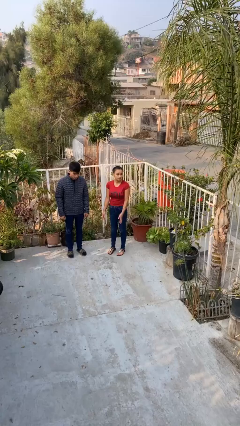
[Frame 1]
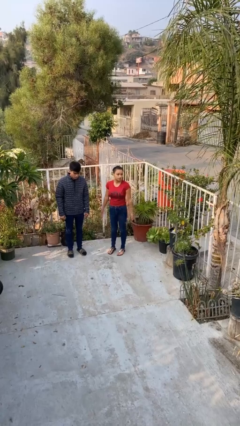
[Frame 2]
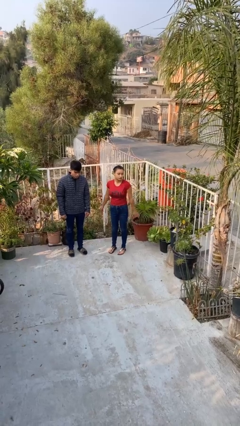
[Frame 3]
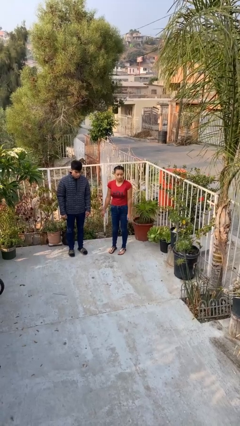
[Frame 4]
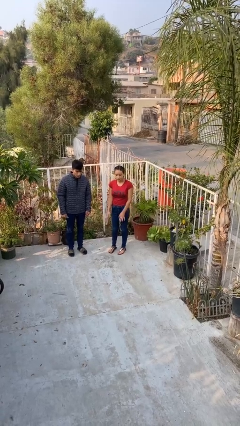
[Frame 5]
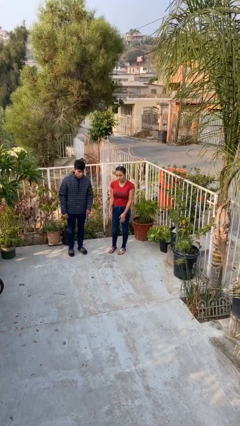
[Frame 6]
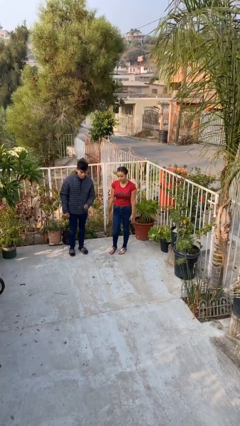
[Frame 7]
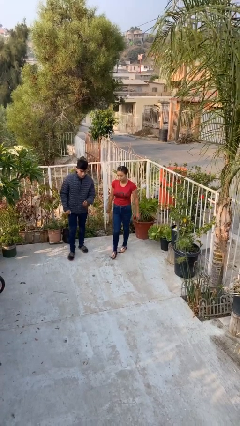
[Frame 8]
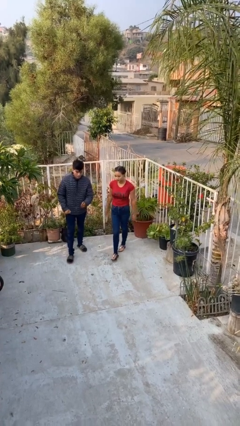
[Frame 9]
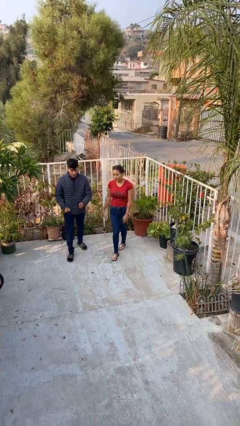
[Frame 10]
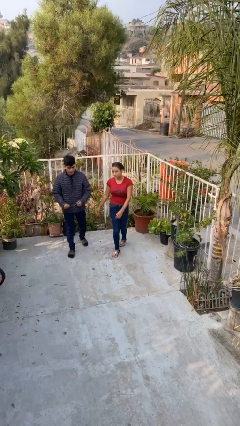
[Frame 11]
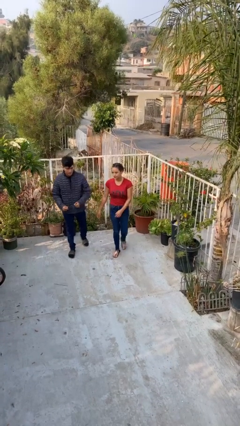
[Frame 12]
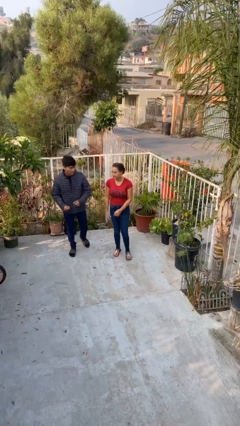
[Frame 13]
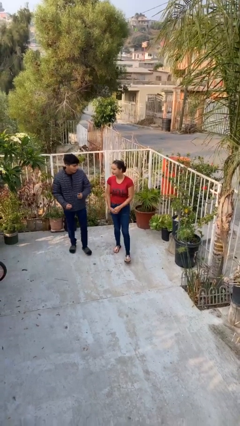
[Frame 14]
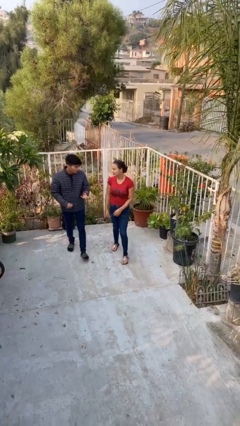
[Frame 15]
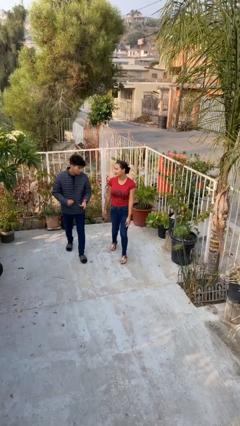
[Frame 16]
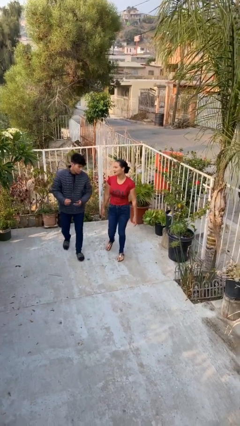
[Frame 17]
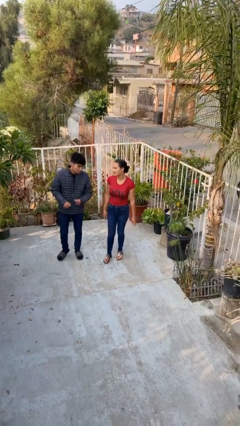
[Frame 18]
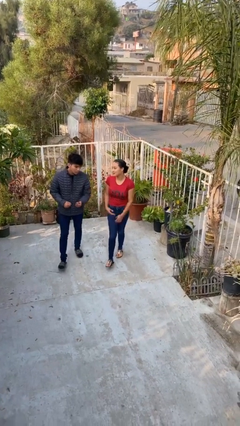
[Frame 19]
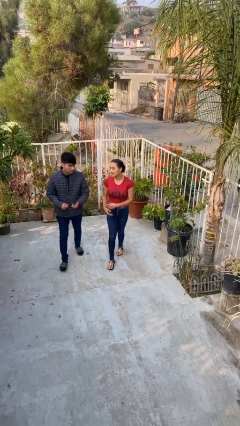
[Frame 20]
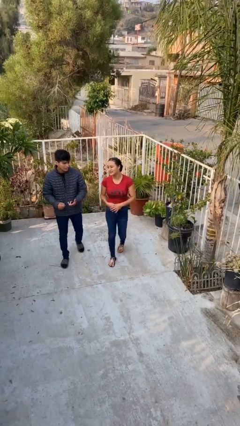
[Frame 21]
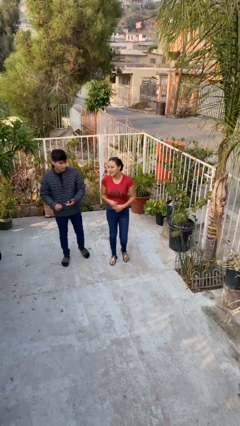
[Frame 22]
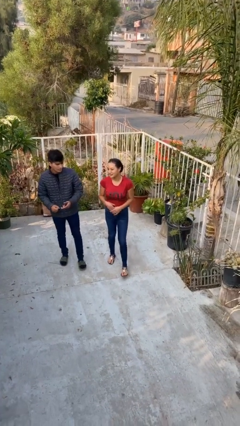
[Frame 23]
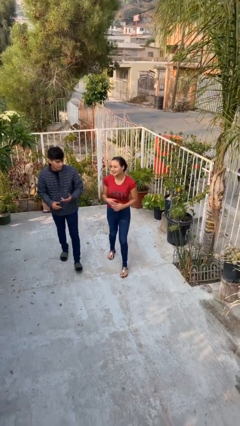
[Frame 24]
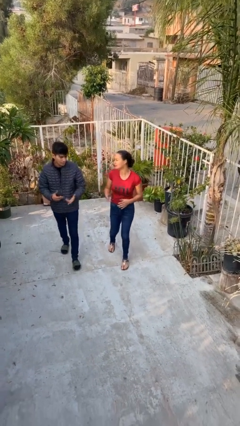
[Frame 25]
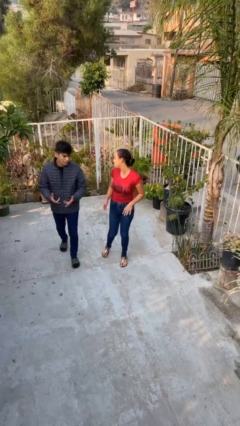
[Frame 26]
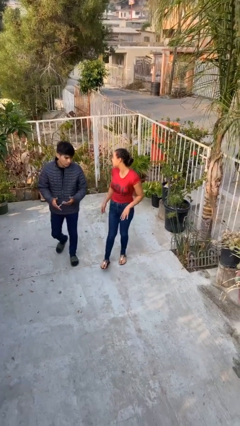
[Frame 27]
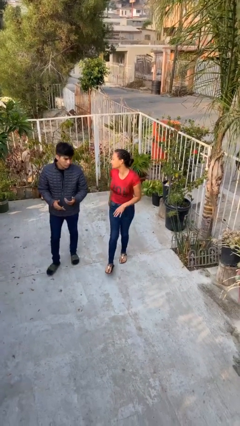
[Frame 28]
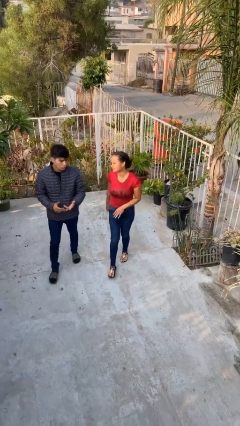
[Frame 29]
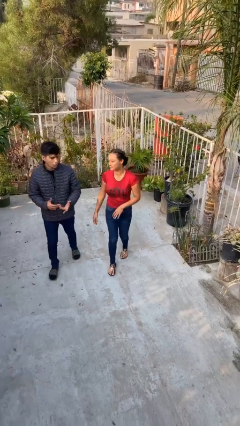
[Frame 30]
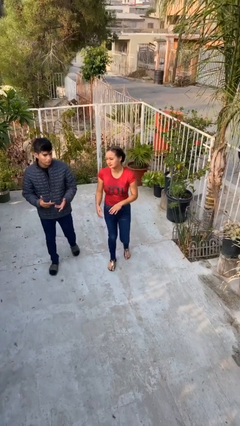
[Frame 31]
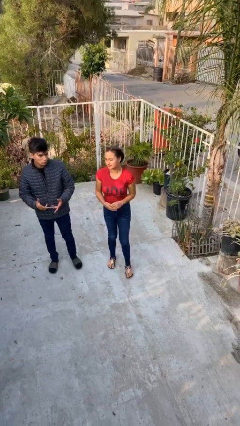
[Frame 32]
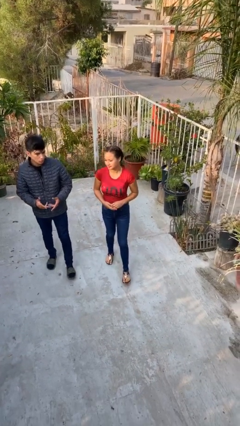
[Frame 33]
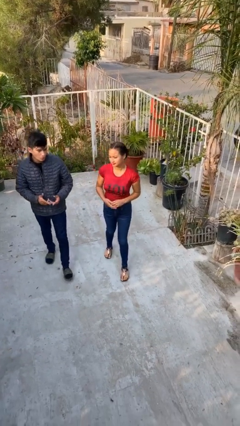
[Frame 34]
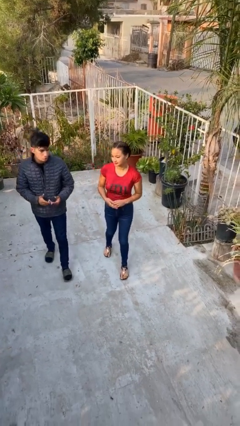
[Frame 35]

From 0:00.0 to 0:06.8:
person talks to person

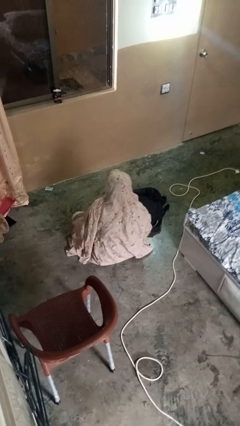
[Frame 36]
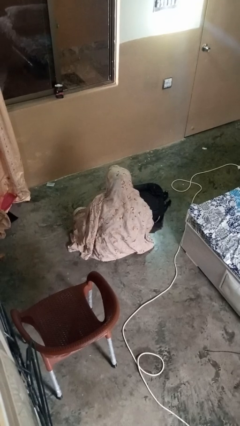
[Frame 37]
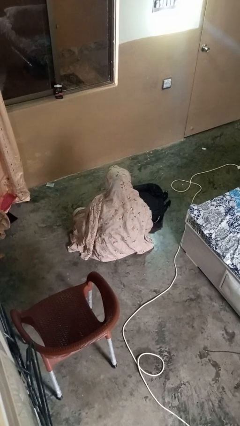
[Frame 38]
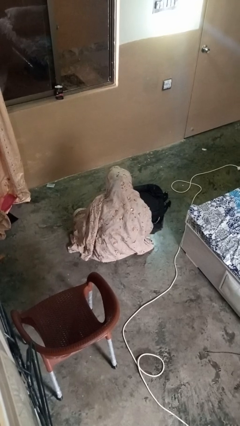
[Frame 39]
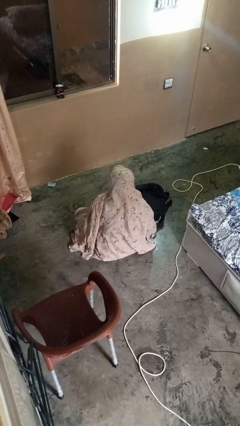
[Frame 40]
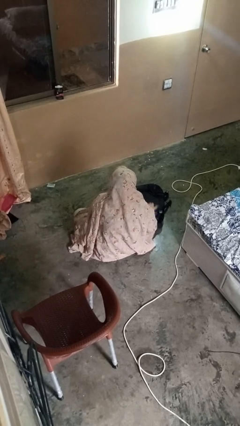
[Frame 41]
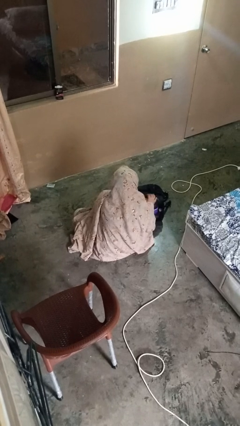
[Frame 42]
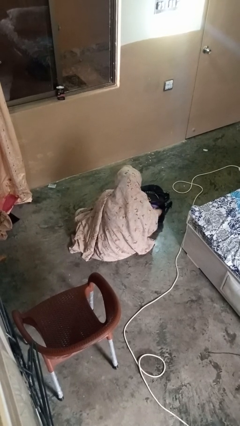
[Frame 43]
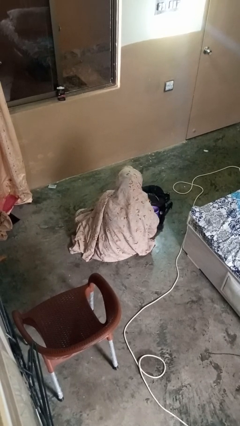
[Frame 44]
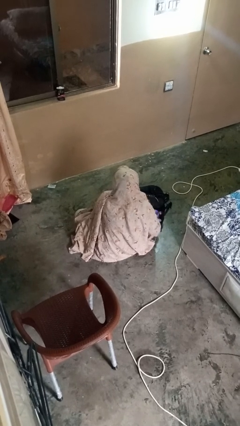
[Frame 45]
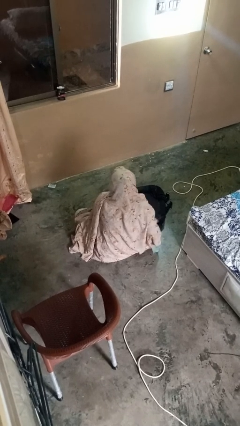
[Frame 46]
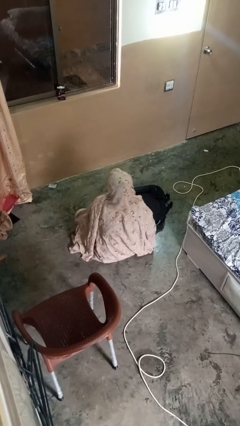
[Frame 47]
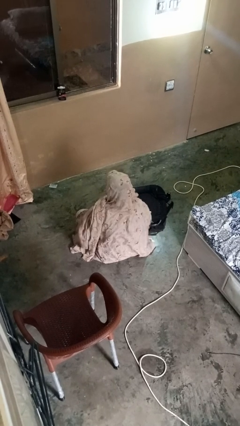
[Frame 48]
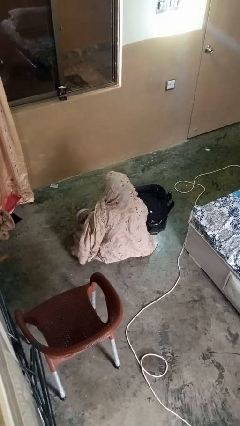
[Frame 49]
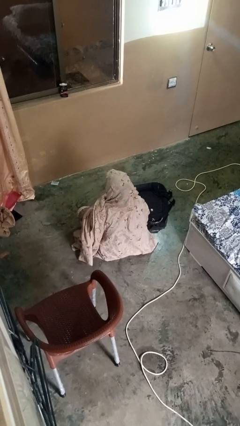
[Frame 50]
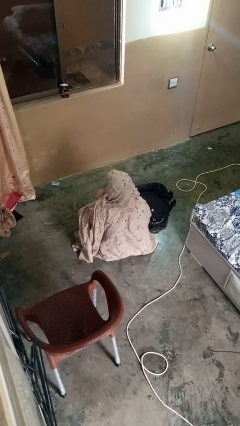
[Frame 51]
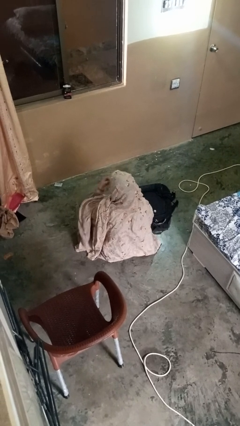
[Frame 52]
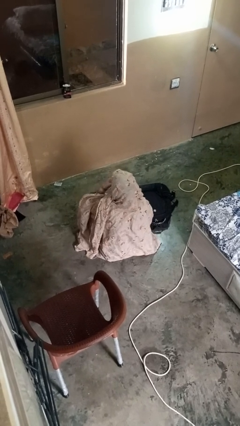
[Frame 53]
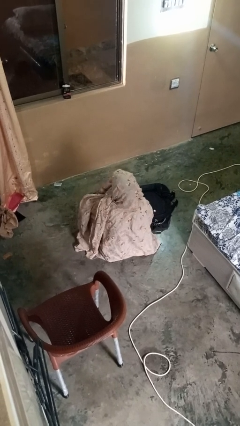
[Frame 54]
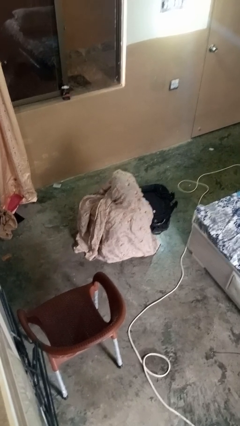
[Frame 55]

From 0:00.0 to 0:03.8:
person eats snack from bag

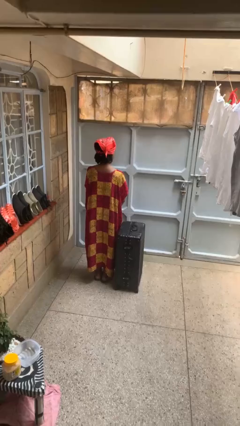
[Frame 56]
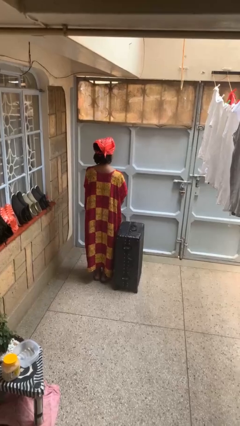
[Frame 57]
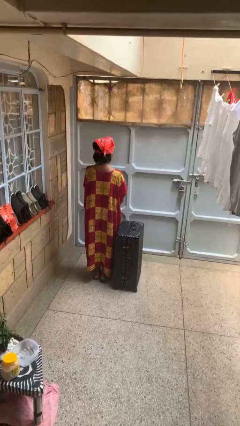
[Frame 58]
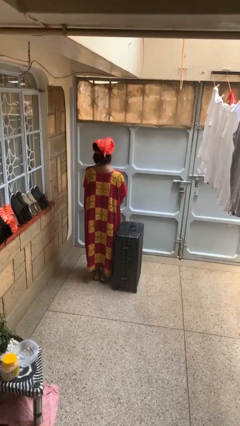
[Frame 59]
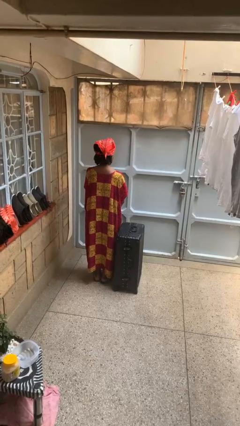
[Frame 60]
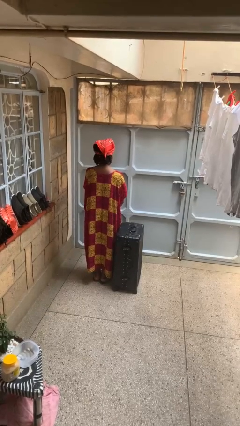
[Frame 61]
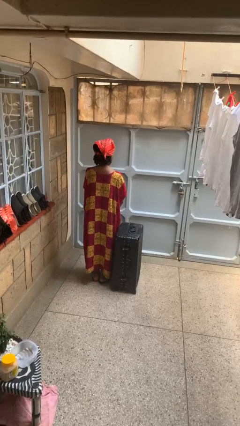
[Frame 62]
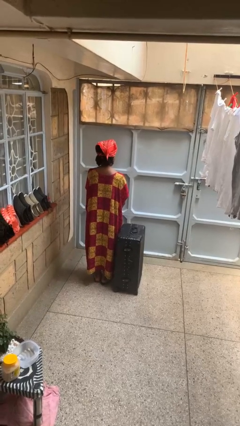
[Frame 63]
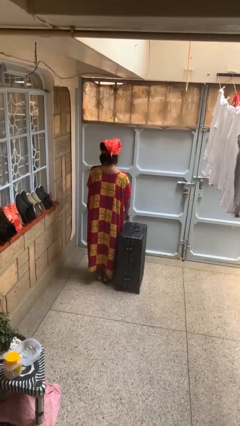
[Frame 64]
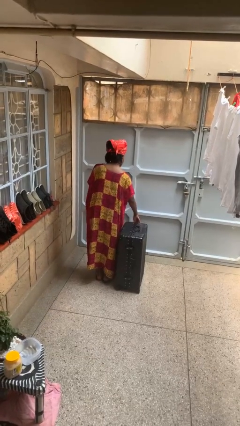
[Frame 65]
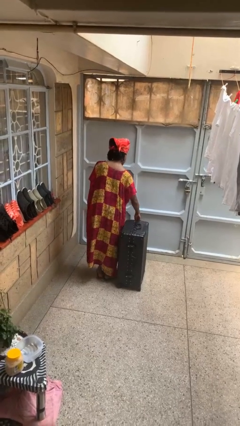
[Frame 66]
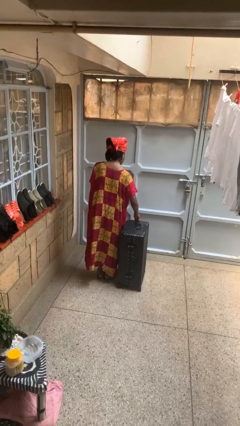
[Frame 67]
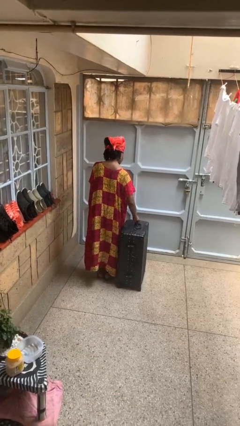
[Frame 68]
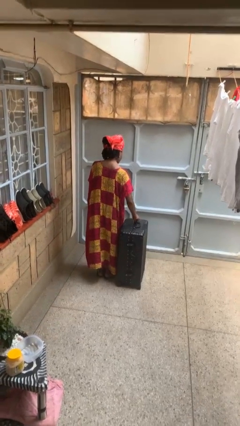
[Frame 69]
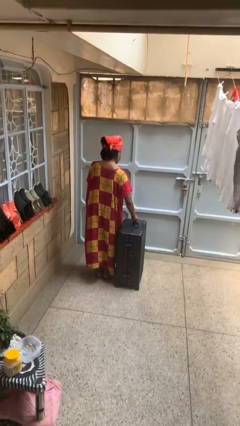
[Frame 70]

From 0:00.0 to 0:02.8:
person opens suitcase

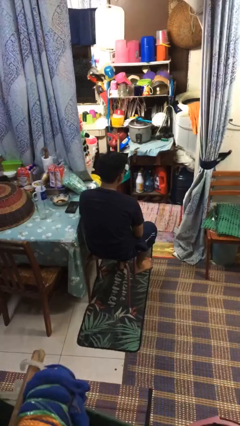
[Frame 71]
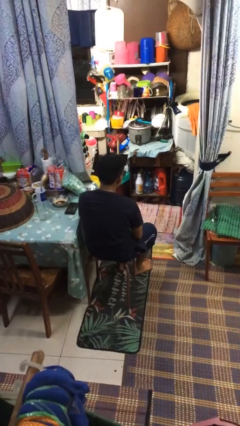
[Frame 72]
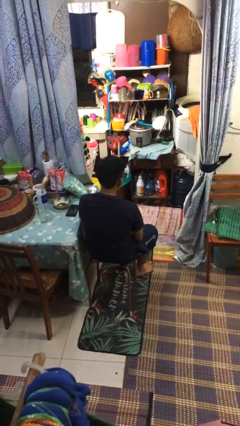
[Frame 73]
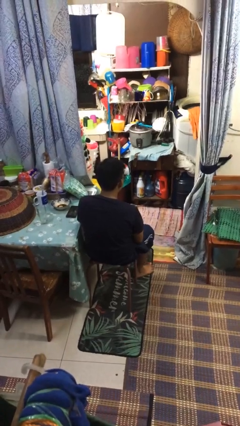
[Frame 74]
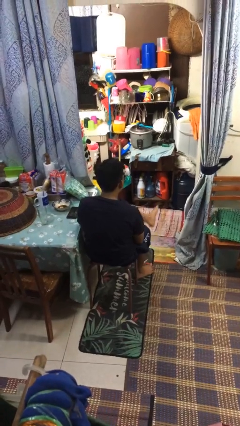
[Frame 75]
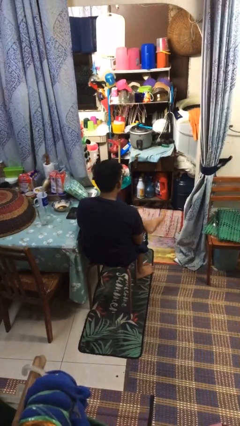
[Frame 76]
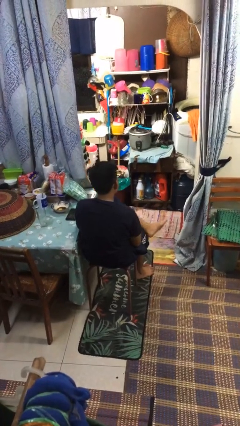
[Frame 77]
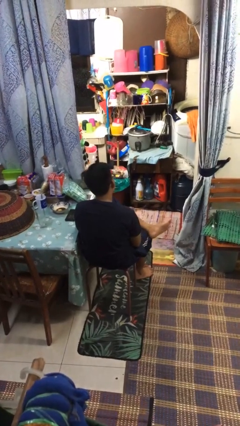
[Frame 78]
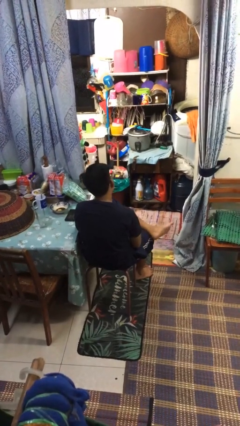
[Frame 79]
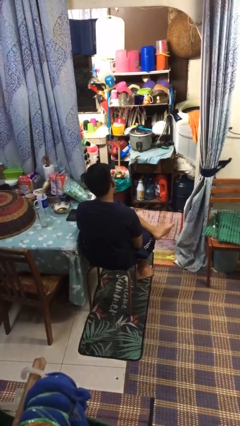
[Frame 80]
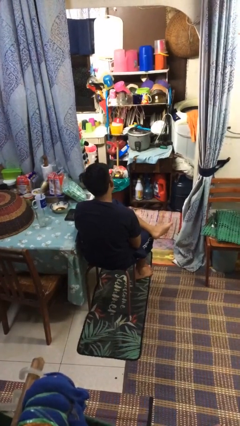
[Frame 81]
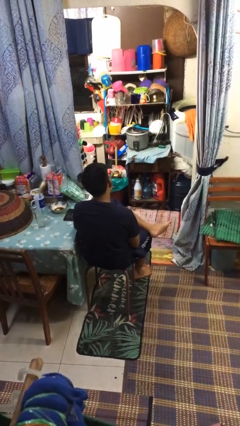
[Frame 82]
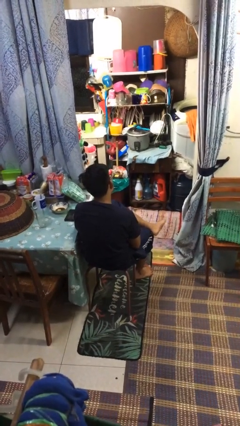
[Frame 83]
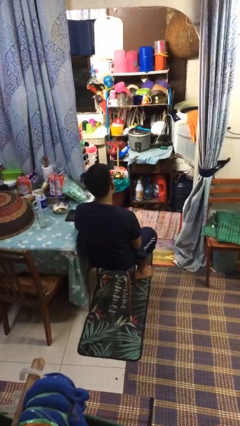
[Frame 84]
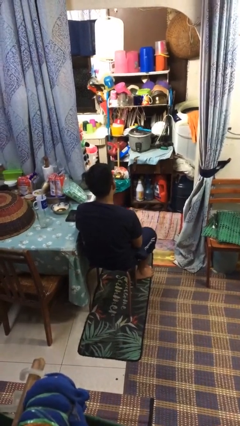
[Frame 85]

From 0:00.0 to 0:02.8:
person crosses legs

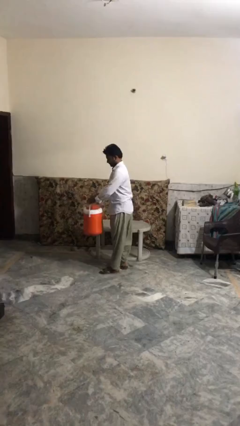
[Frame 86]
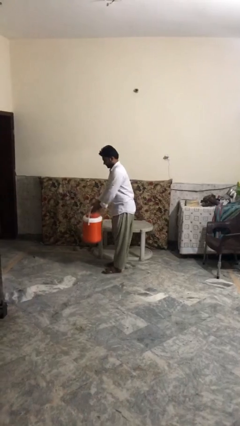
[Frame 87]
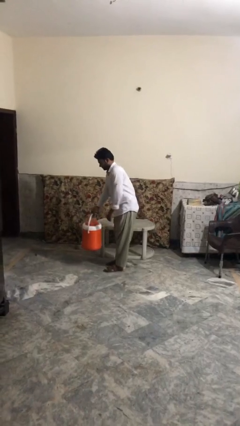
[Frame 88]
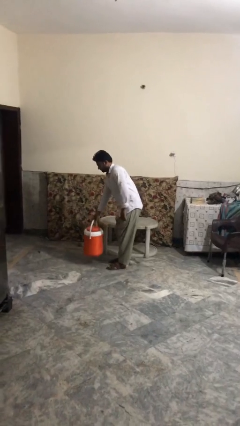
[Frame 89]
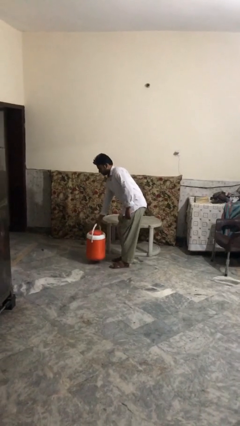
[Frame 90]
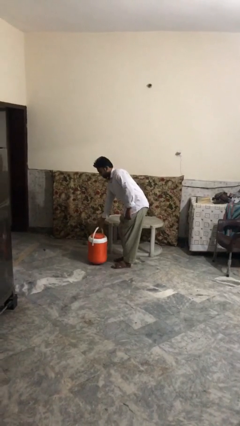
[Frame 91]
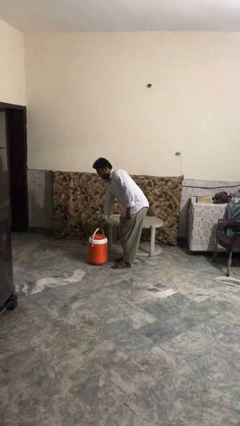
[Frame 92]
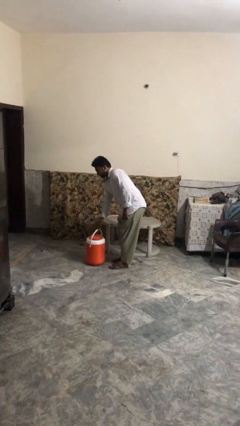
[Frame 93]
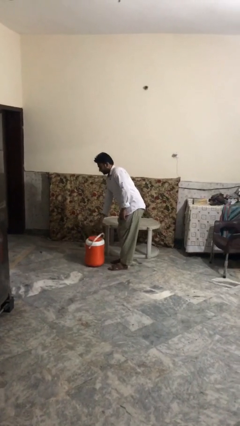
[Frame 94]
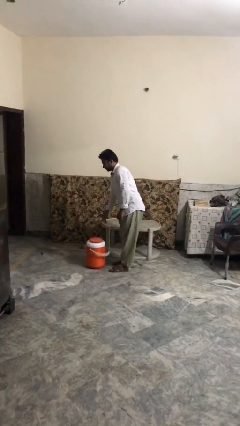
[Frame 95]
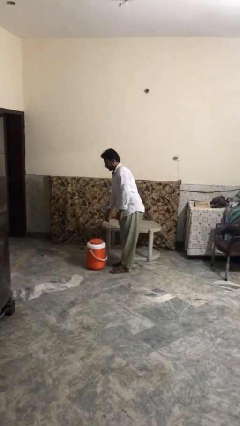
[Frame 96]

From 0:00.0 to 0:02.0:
person puts down object on floor
